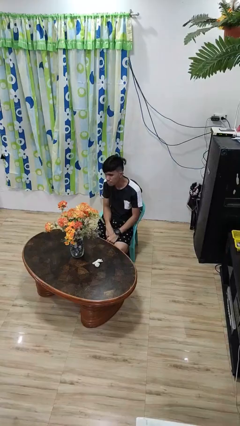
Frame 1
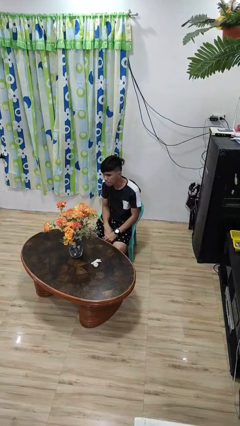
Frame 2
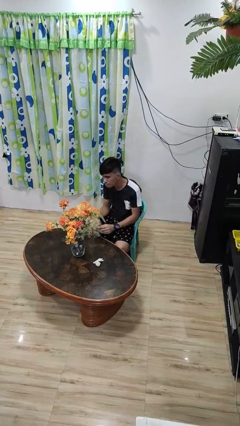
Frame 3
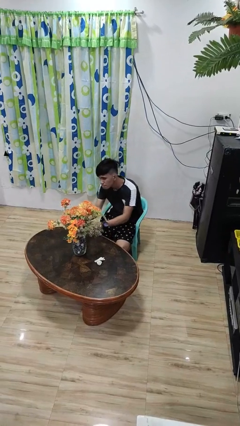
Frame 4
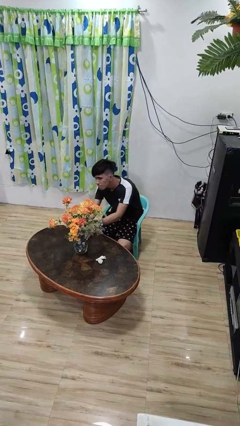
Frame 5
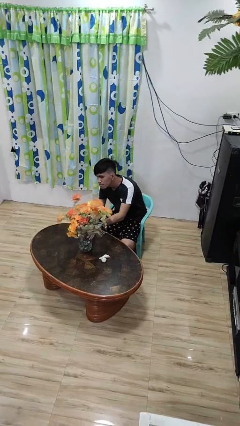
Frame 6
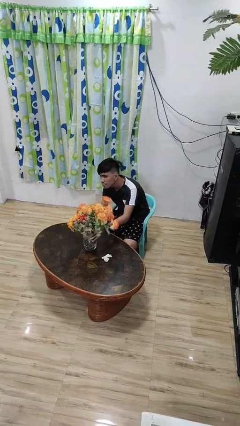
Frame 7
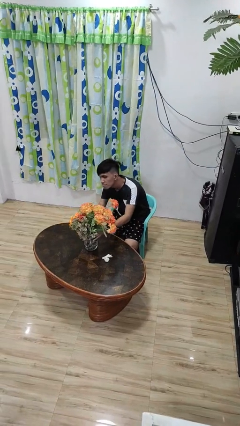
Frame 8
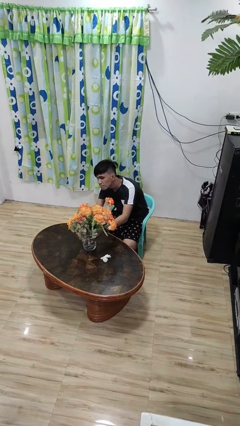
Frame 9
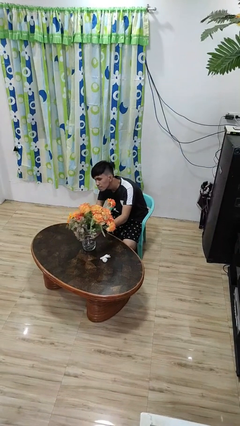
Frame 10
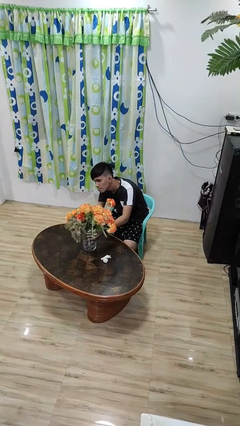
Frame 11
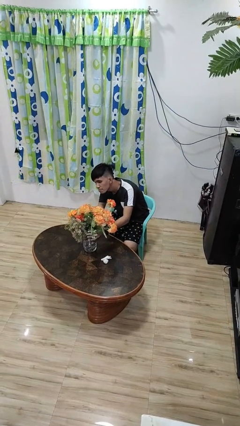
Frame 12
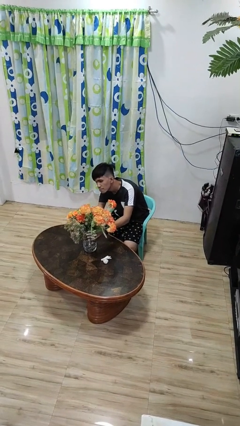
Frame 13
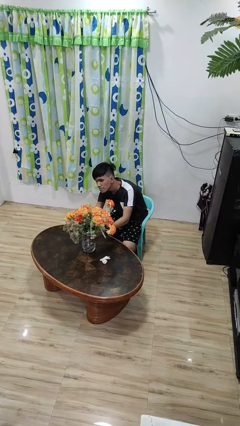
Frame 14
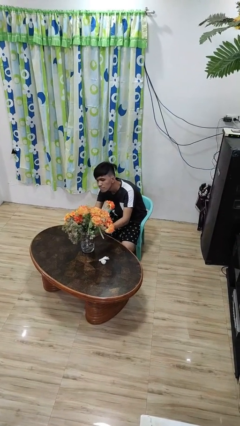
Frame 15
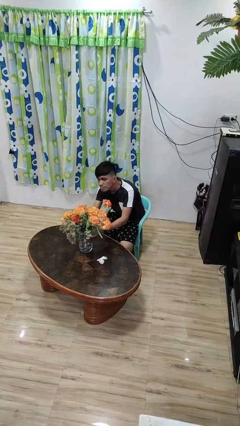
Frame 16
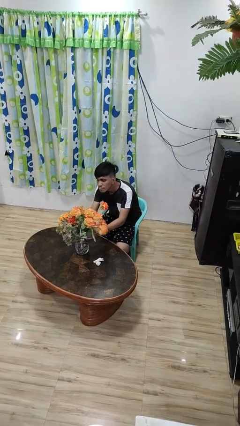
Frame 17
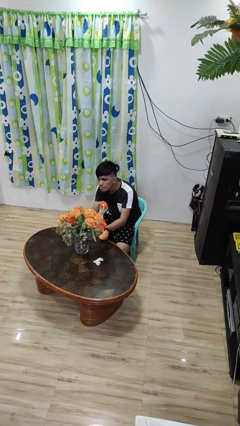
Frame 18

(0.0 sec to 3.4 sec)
person arranges flowers in vase

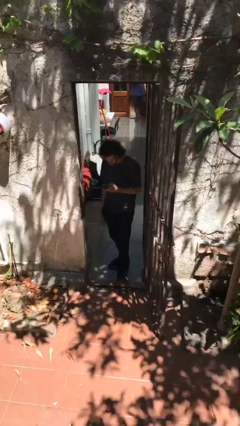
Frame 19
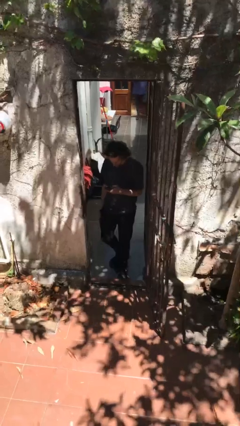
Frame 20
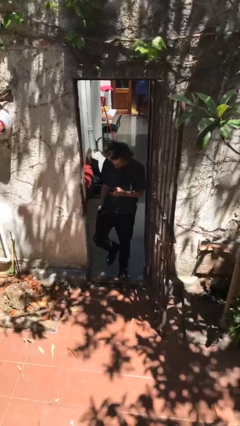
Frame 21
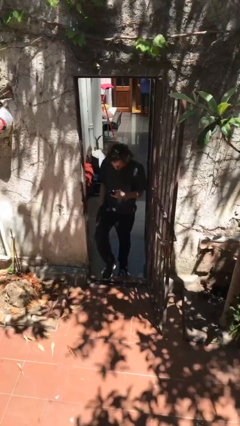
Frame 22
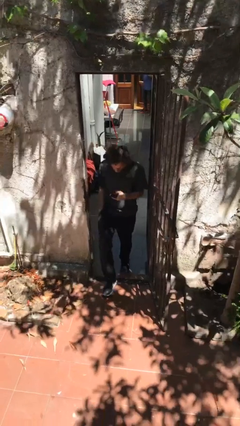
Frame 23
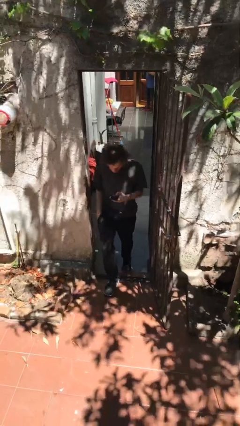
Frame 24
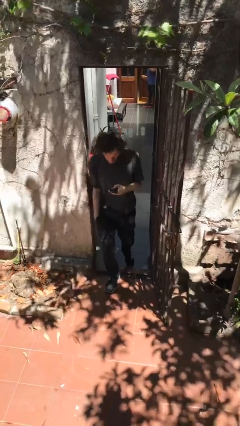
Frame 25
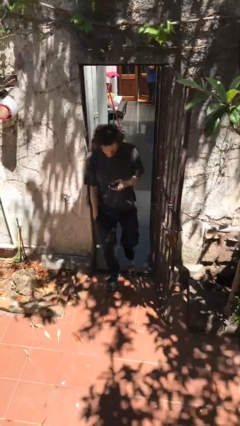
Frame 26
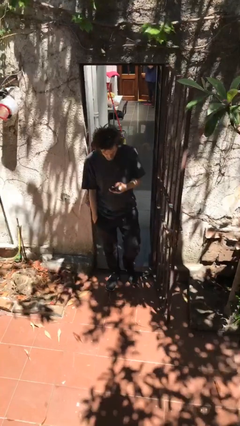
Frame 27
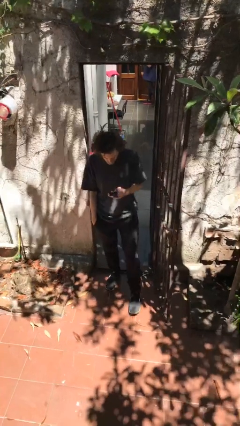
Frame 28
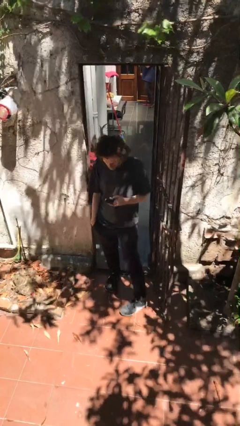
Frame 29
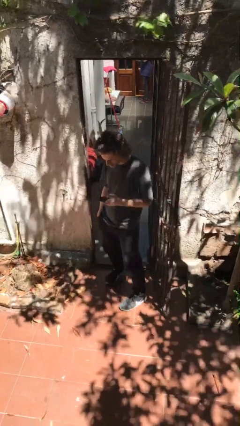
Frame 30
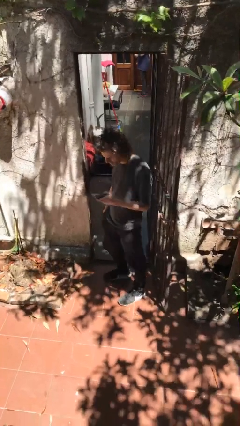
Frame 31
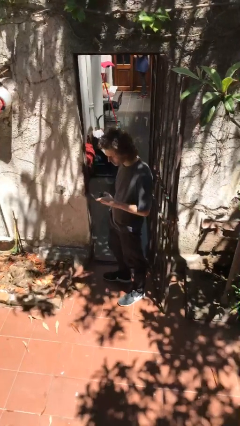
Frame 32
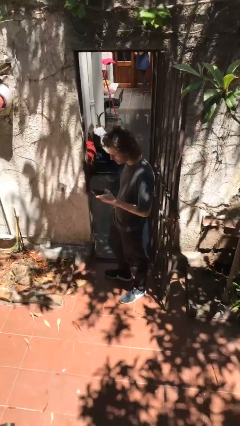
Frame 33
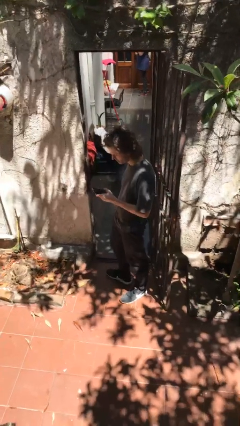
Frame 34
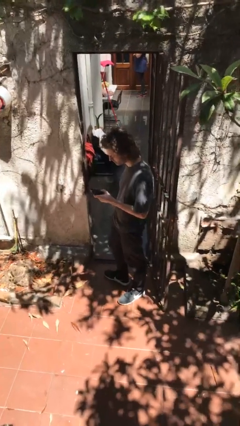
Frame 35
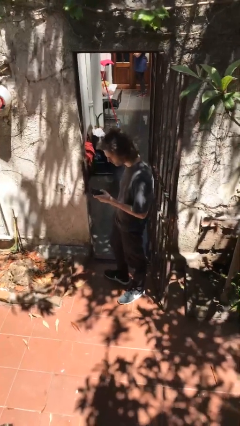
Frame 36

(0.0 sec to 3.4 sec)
person enters scene through structure

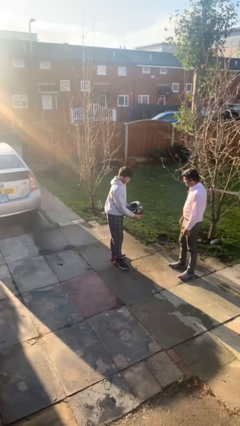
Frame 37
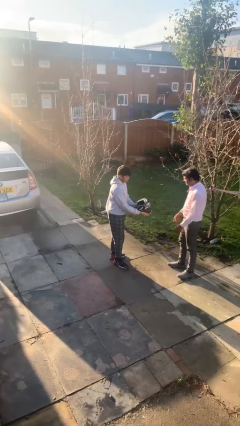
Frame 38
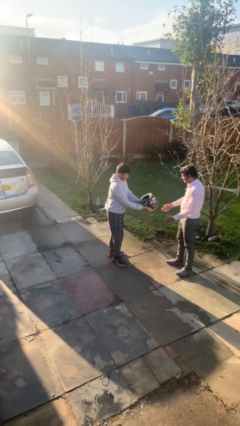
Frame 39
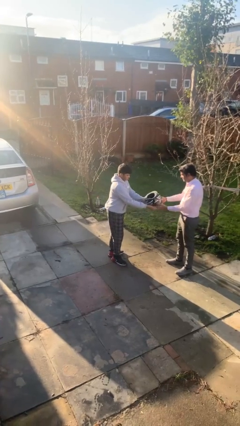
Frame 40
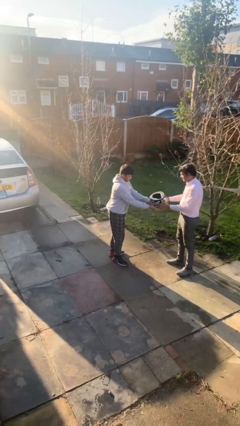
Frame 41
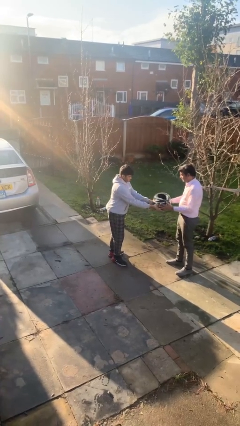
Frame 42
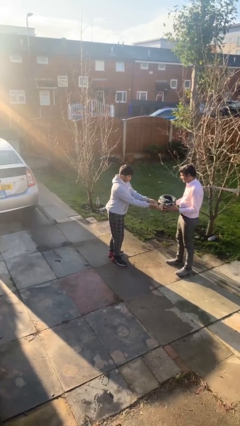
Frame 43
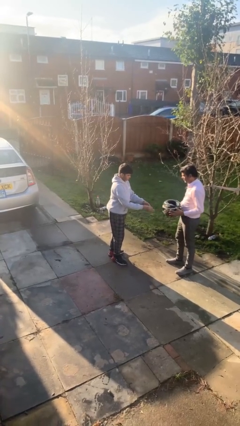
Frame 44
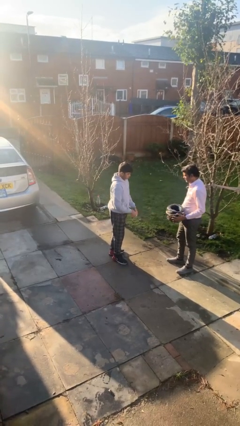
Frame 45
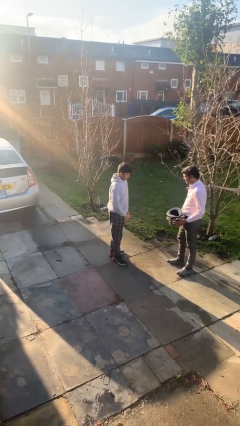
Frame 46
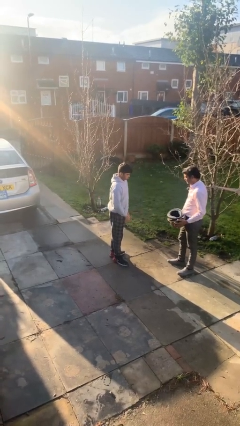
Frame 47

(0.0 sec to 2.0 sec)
person transfers object to person

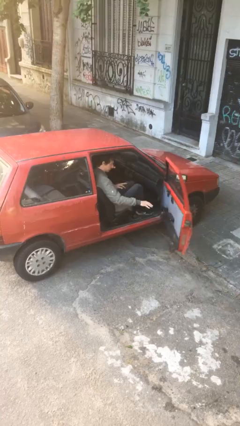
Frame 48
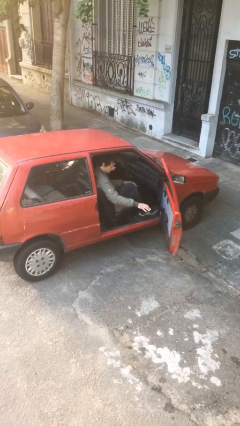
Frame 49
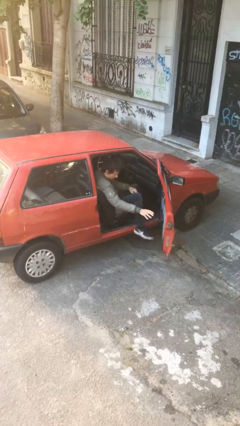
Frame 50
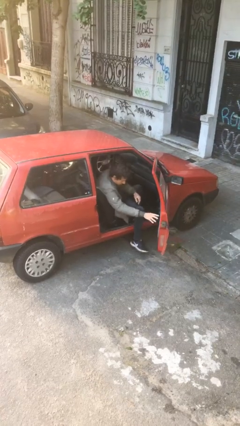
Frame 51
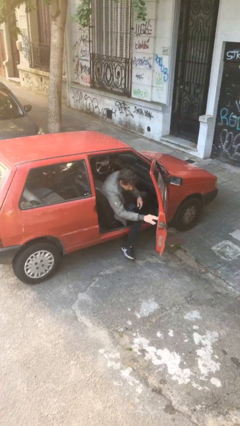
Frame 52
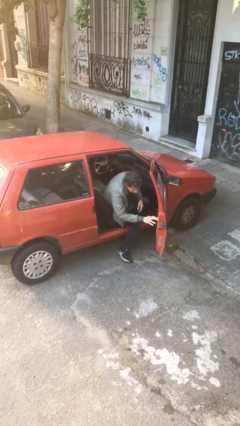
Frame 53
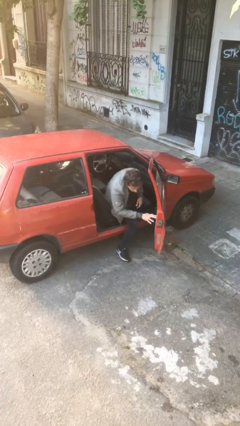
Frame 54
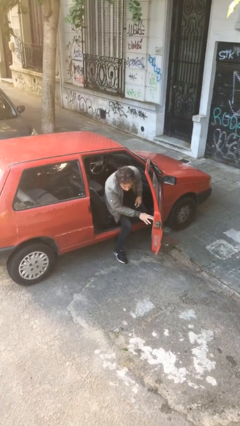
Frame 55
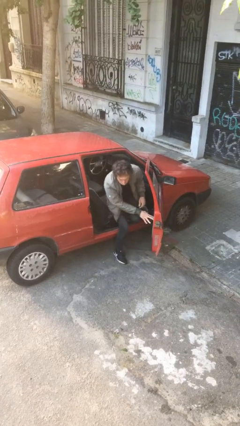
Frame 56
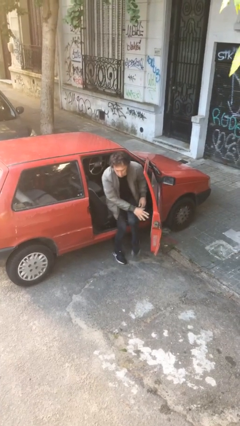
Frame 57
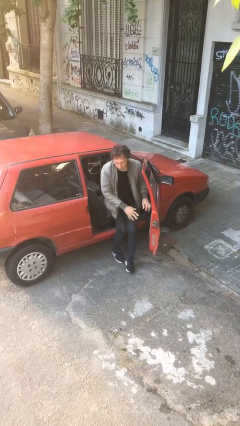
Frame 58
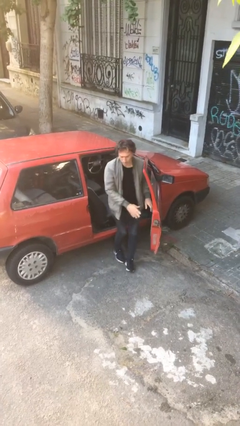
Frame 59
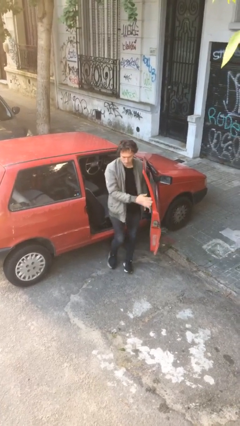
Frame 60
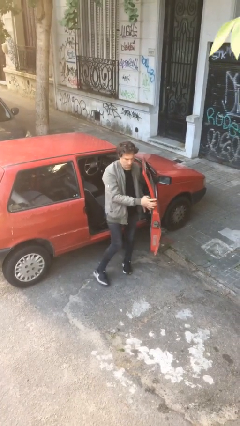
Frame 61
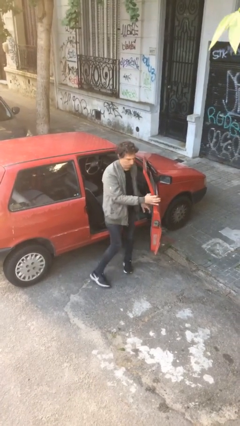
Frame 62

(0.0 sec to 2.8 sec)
person exits car

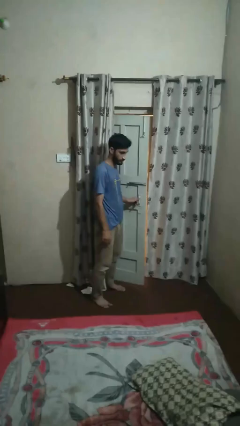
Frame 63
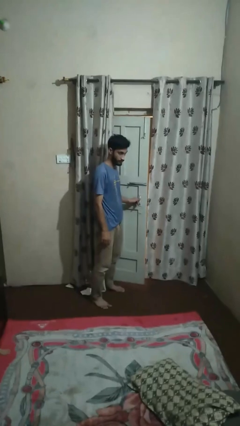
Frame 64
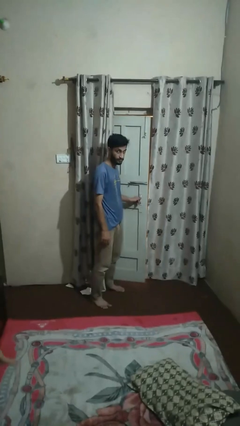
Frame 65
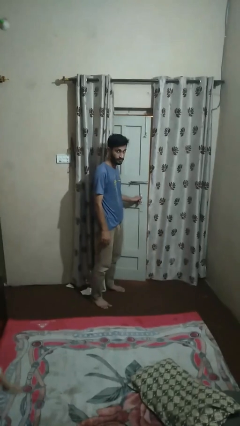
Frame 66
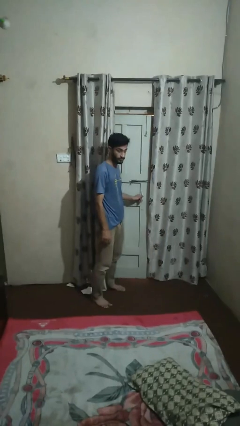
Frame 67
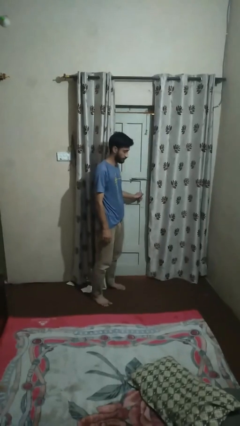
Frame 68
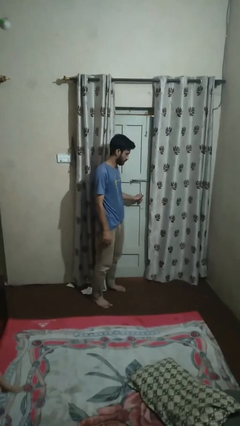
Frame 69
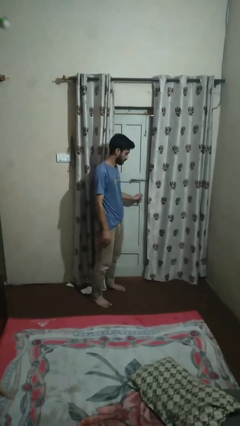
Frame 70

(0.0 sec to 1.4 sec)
person closes facility door

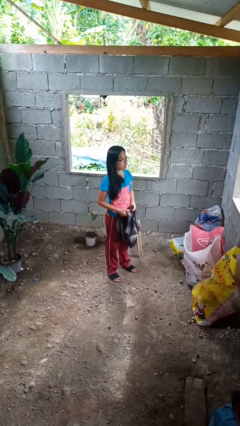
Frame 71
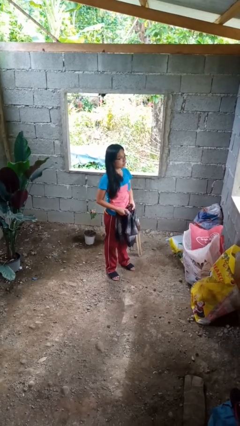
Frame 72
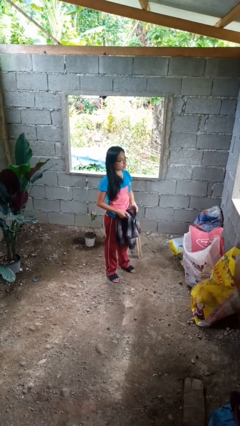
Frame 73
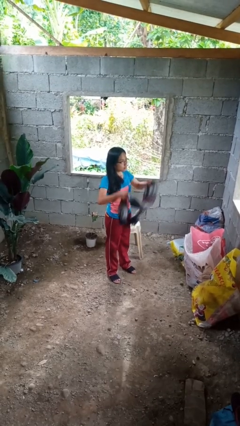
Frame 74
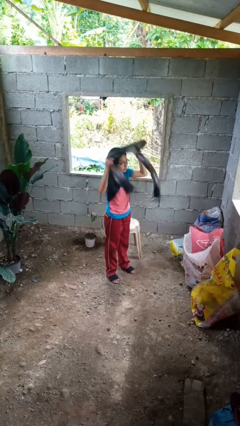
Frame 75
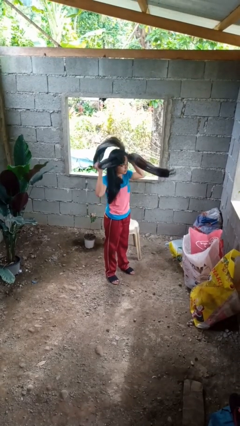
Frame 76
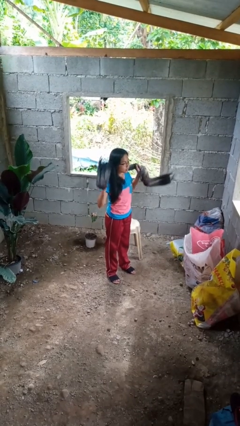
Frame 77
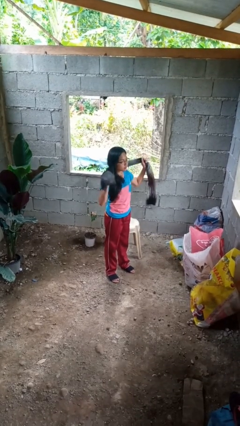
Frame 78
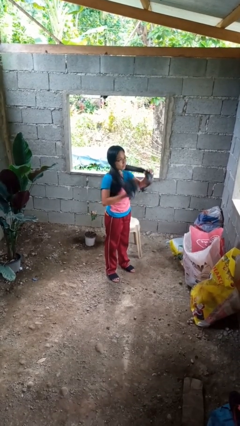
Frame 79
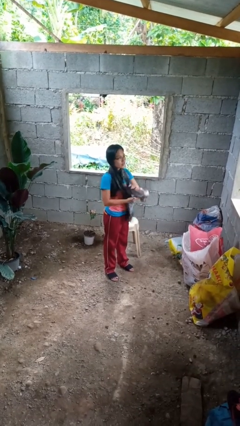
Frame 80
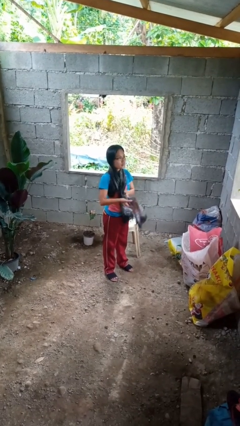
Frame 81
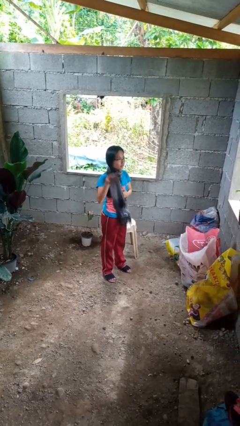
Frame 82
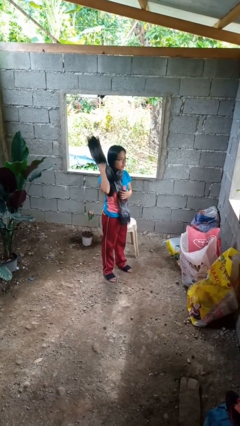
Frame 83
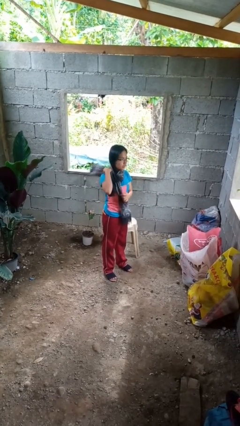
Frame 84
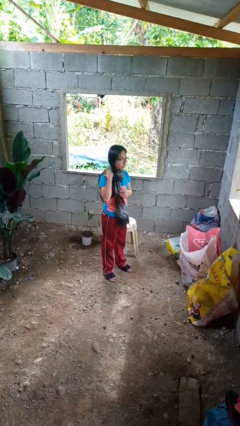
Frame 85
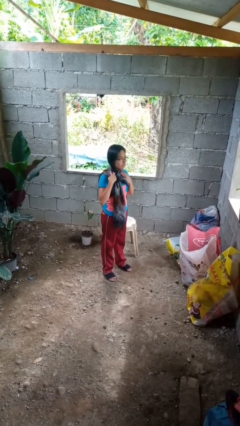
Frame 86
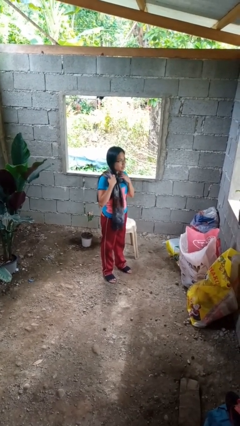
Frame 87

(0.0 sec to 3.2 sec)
person puts on scarf

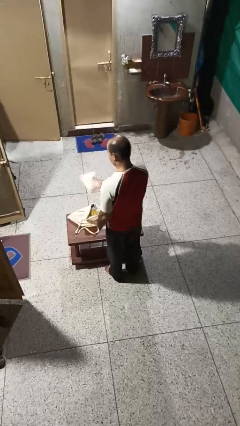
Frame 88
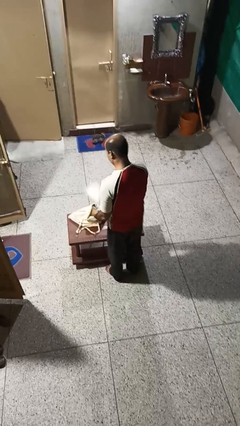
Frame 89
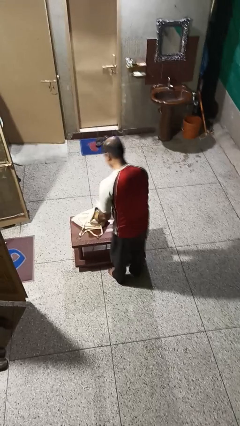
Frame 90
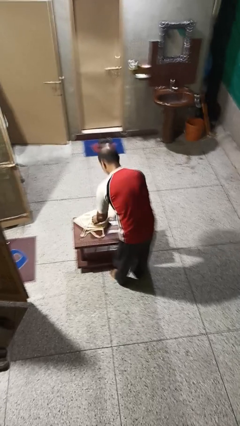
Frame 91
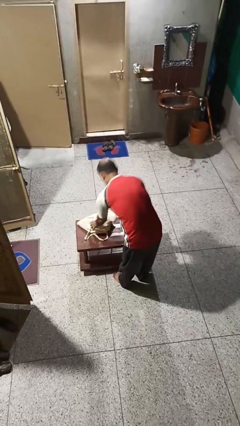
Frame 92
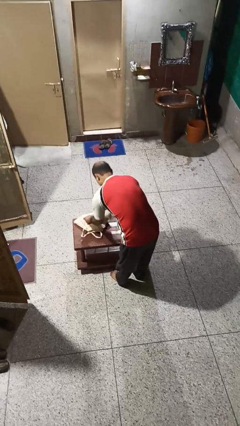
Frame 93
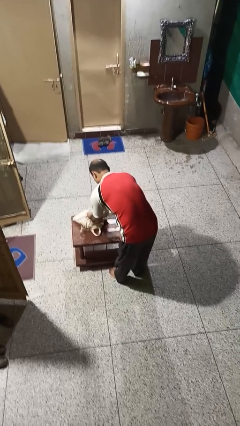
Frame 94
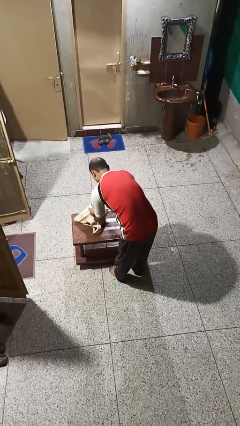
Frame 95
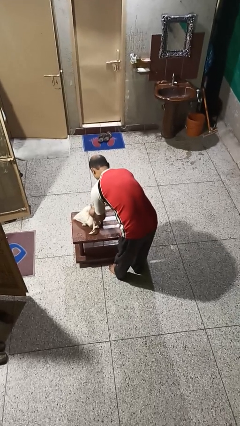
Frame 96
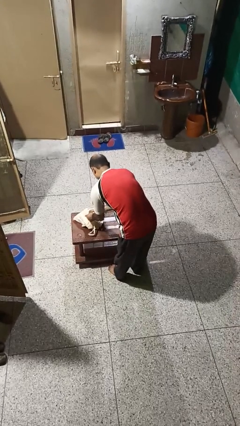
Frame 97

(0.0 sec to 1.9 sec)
person puts object into bag
